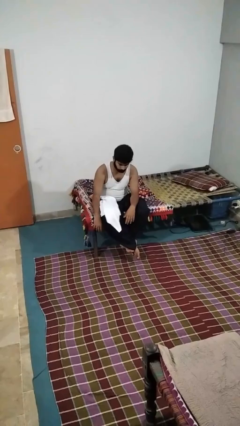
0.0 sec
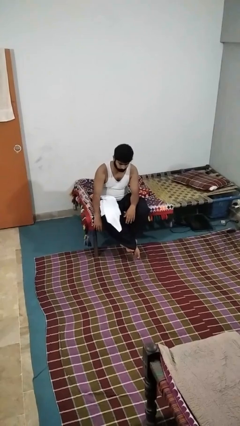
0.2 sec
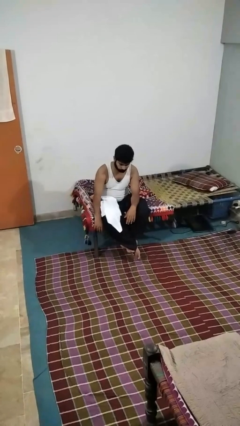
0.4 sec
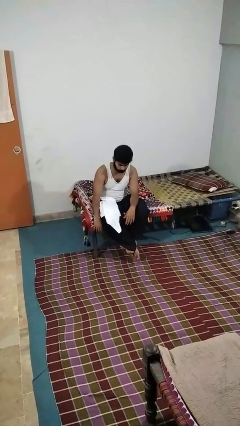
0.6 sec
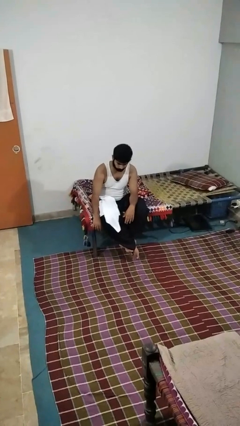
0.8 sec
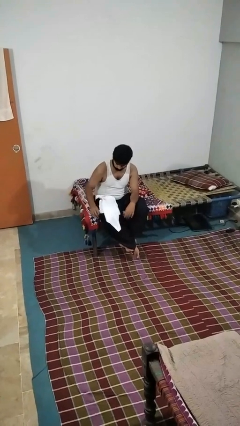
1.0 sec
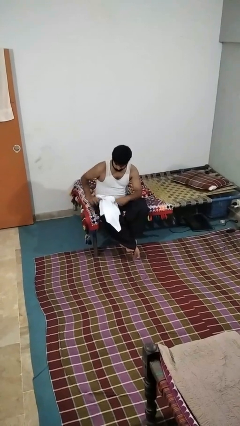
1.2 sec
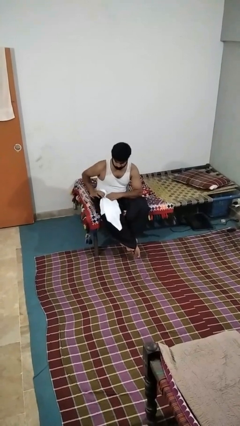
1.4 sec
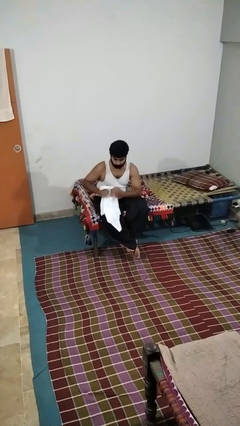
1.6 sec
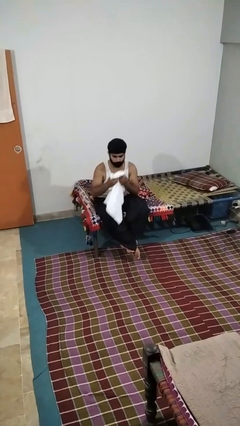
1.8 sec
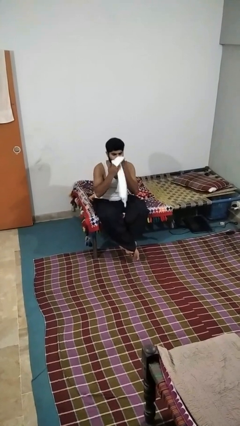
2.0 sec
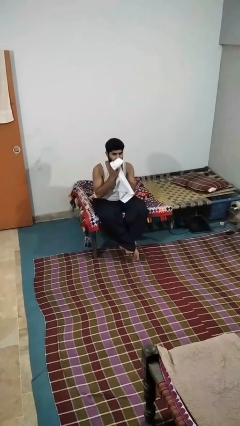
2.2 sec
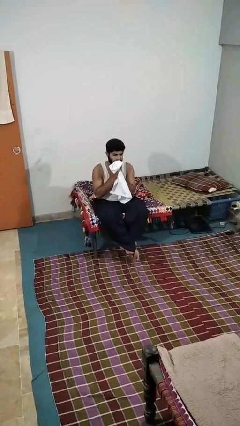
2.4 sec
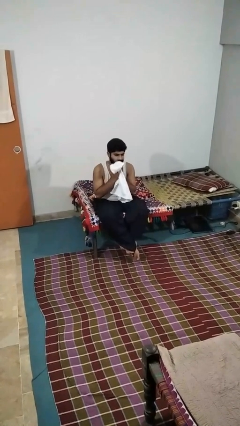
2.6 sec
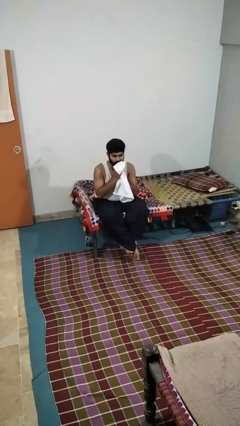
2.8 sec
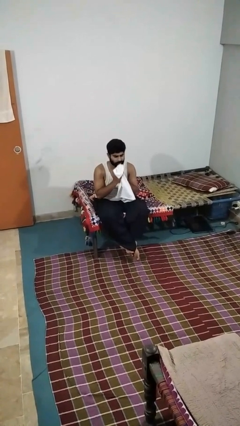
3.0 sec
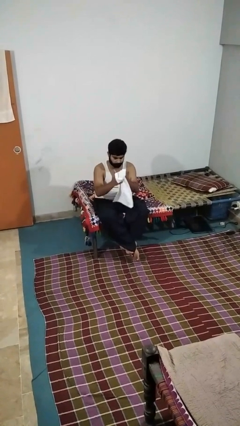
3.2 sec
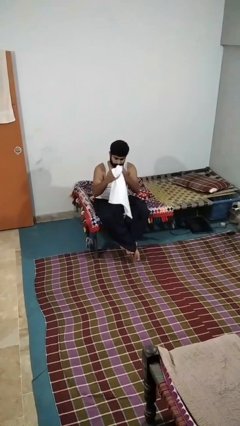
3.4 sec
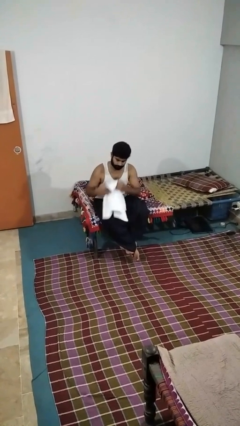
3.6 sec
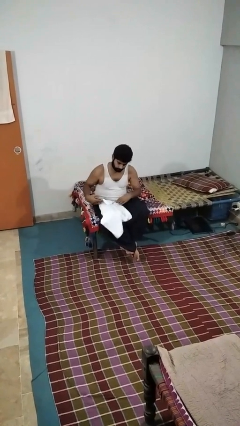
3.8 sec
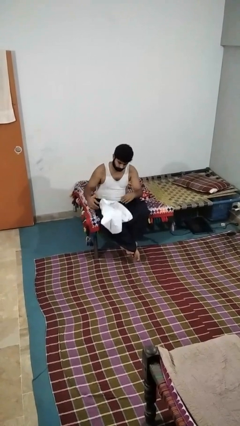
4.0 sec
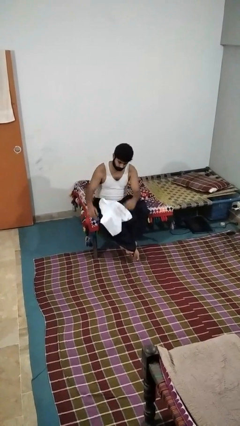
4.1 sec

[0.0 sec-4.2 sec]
person wipes mouth with napkin

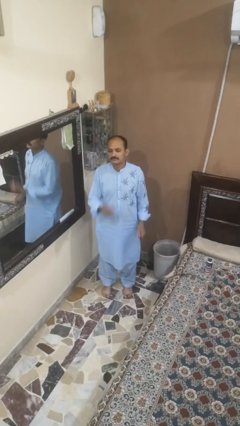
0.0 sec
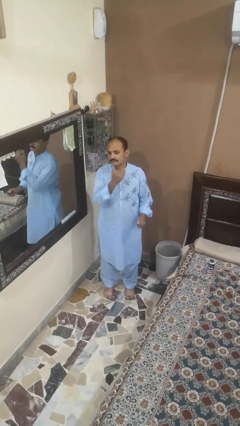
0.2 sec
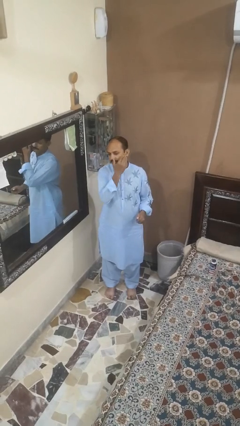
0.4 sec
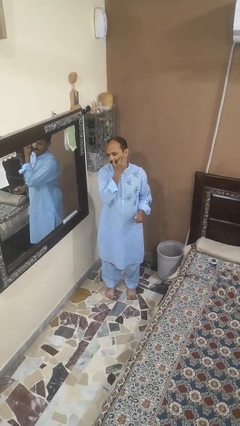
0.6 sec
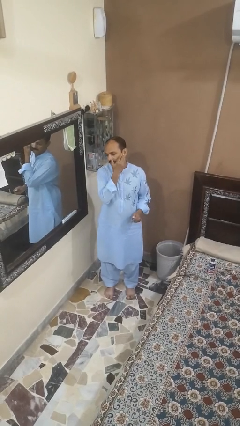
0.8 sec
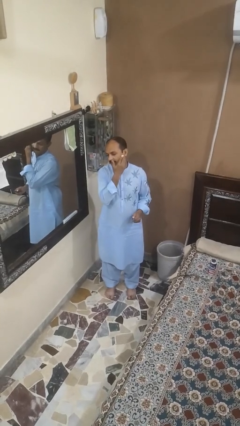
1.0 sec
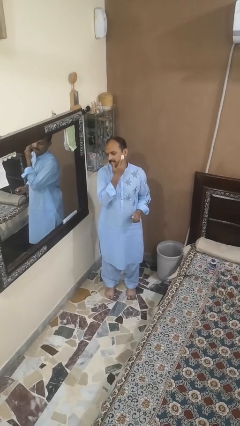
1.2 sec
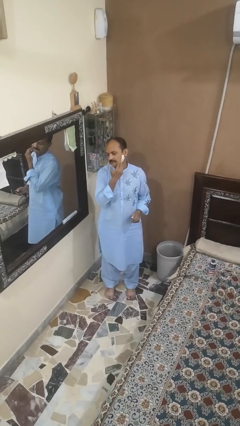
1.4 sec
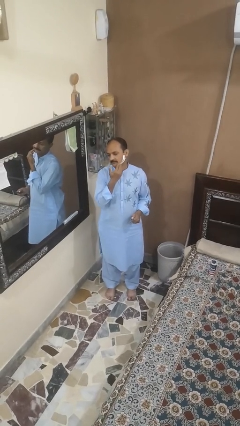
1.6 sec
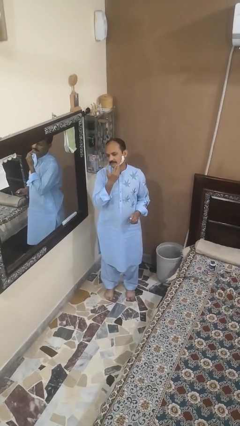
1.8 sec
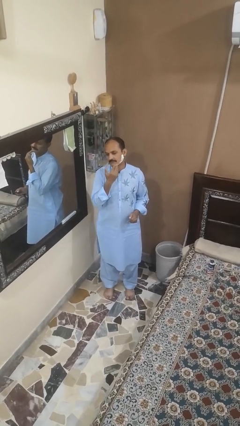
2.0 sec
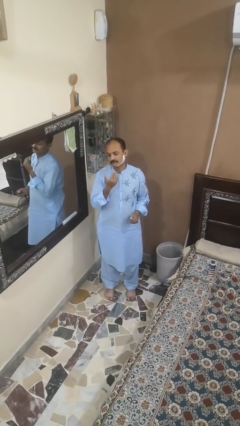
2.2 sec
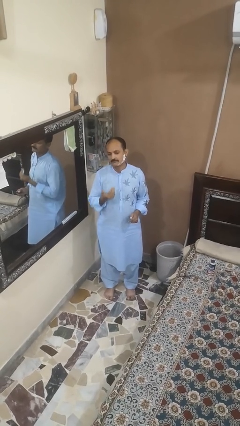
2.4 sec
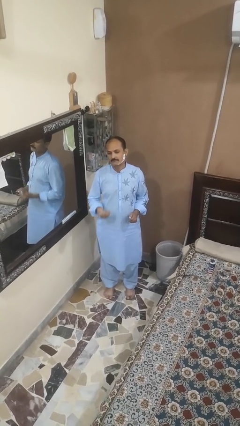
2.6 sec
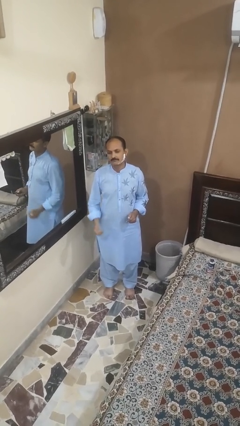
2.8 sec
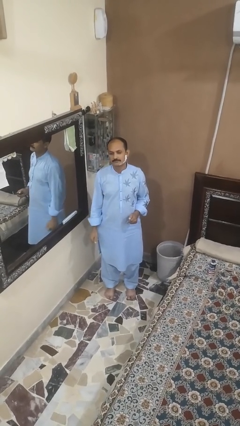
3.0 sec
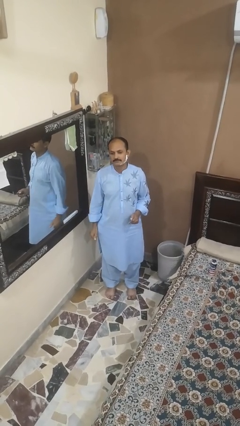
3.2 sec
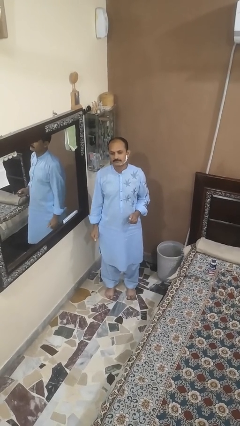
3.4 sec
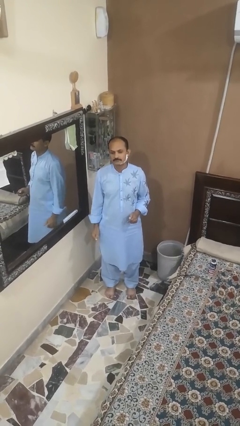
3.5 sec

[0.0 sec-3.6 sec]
person applies shaving cream

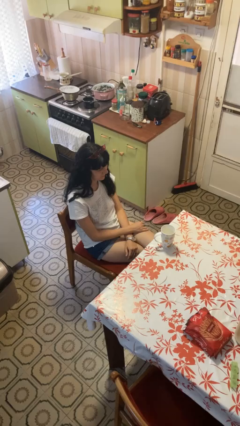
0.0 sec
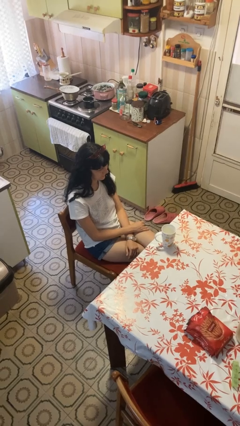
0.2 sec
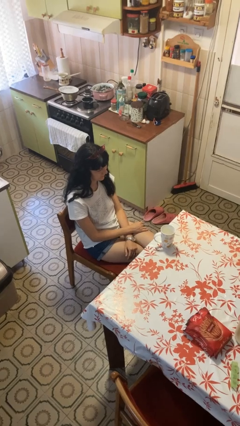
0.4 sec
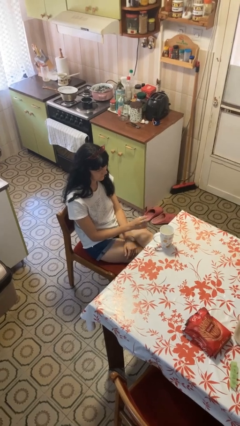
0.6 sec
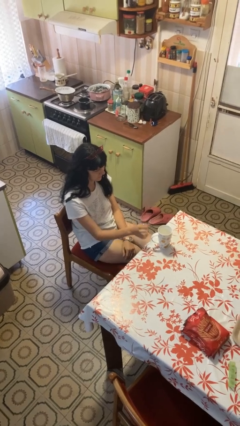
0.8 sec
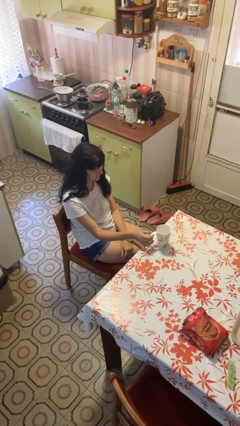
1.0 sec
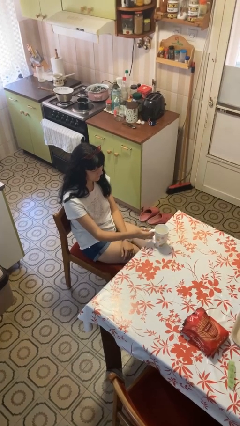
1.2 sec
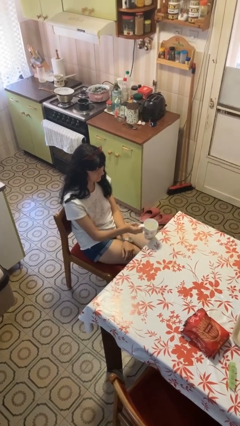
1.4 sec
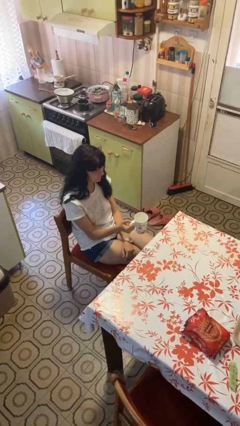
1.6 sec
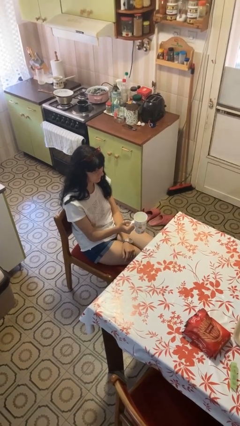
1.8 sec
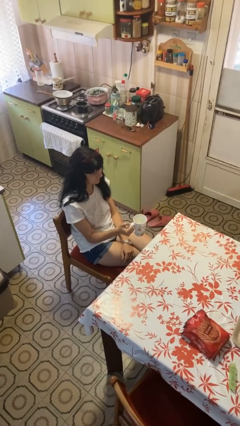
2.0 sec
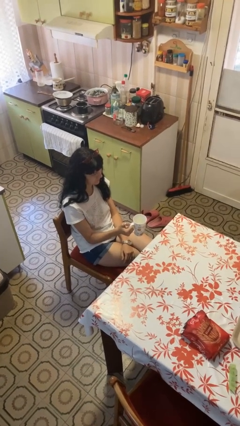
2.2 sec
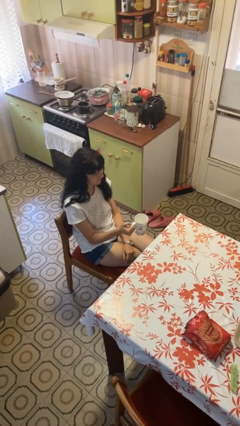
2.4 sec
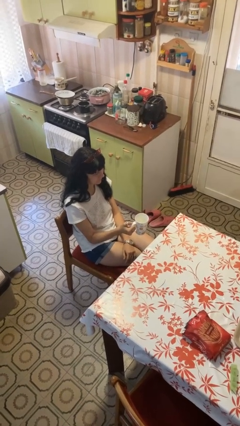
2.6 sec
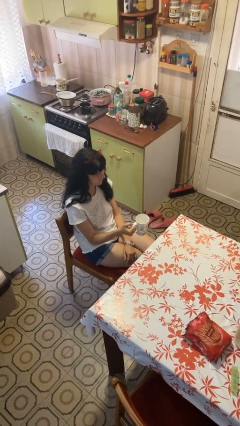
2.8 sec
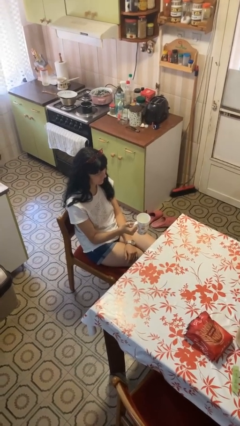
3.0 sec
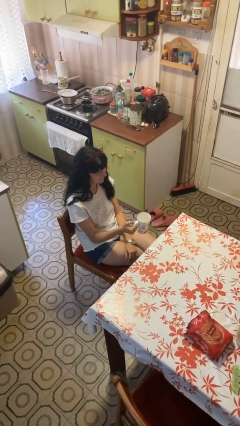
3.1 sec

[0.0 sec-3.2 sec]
person picks up object from table

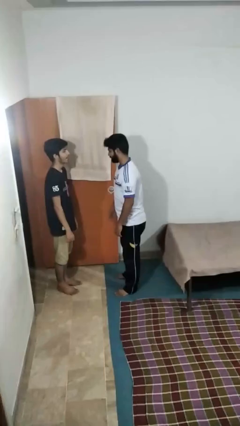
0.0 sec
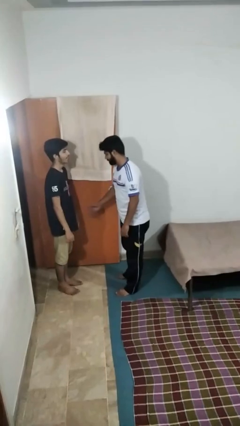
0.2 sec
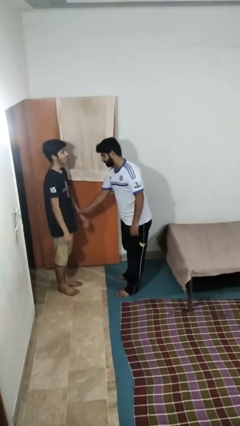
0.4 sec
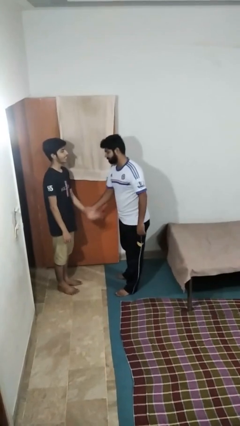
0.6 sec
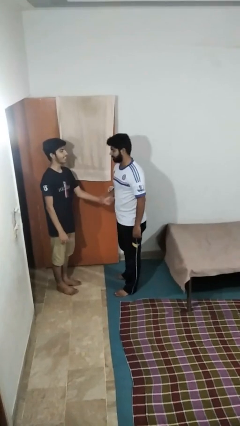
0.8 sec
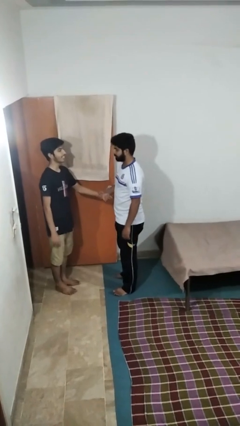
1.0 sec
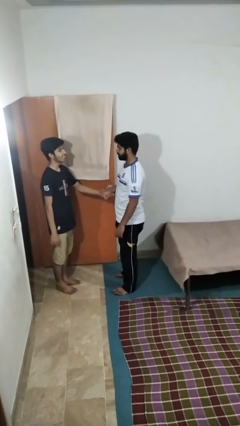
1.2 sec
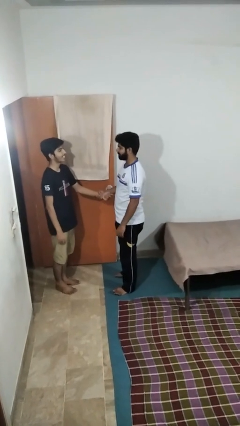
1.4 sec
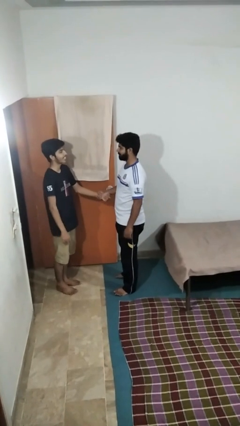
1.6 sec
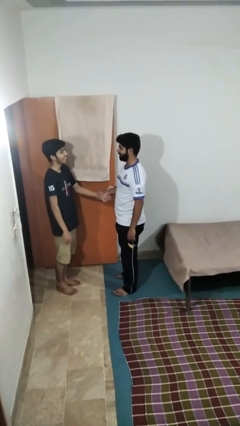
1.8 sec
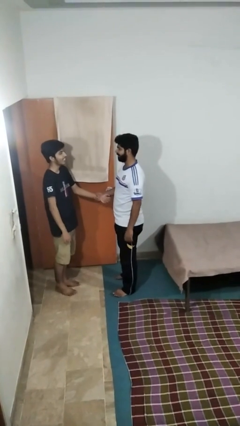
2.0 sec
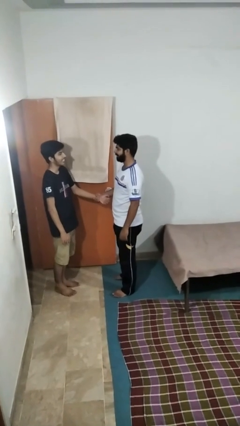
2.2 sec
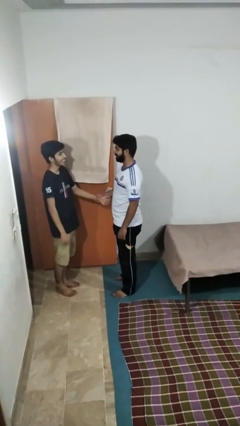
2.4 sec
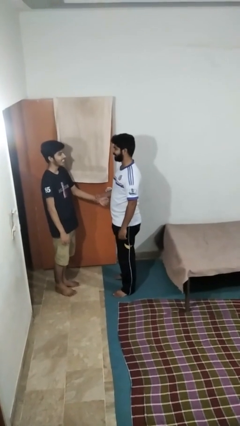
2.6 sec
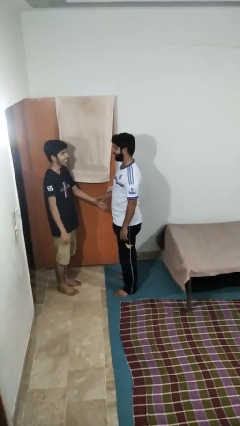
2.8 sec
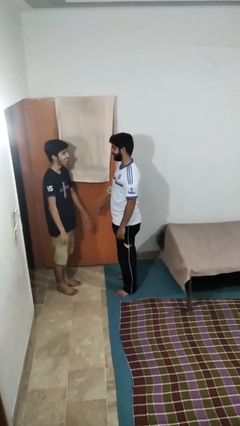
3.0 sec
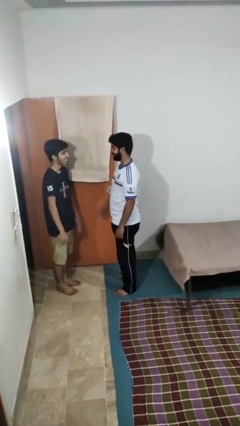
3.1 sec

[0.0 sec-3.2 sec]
person grabs person by forearm

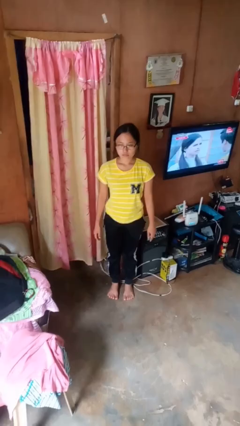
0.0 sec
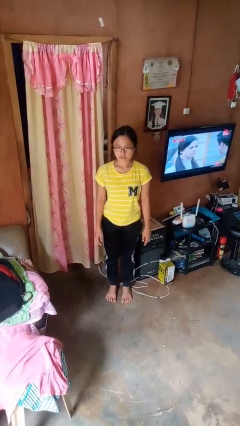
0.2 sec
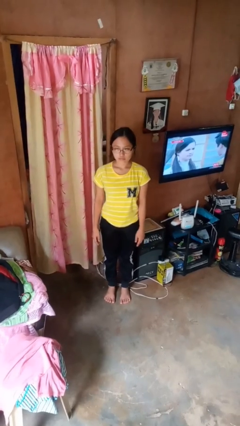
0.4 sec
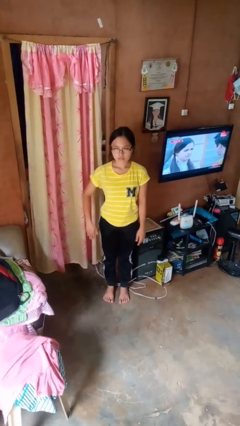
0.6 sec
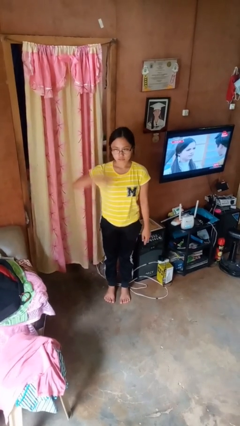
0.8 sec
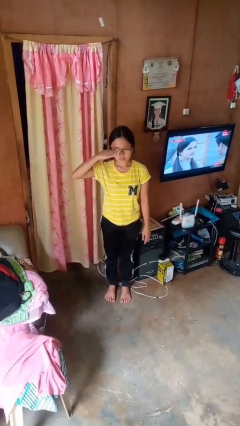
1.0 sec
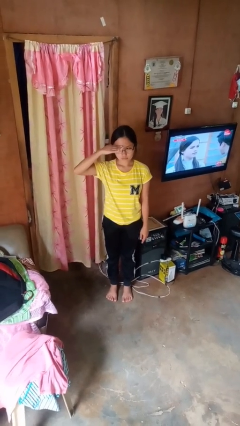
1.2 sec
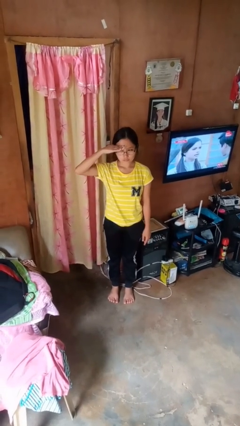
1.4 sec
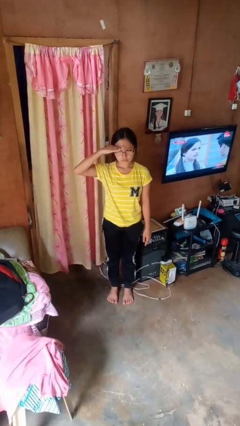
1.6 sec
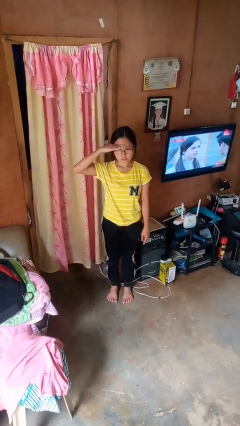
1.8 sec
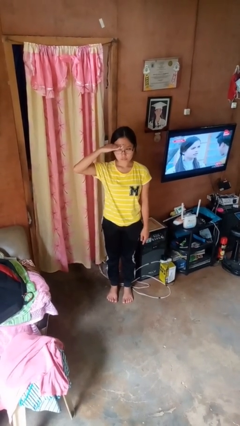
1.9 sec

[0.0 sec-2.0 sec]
person salutes

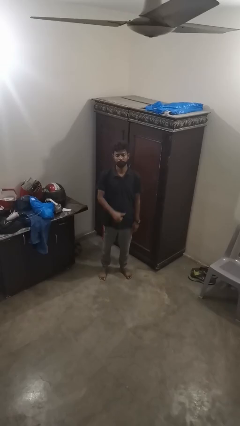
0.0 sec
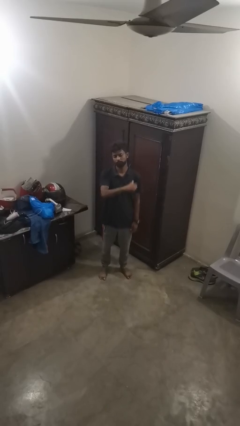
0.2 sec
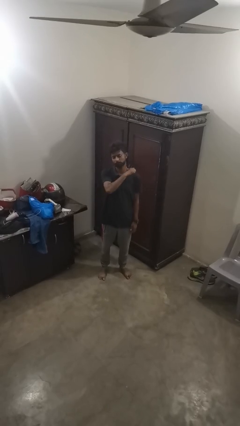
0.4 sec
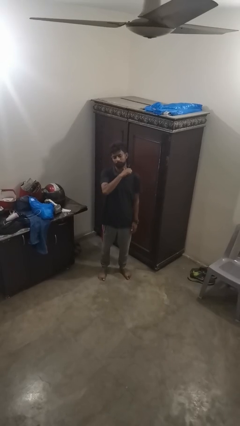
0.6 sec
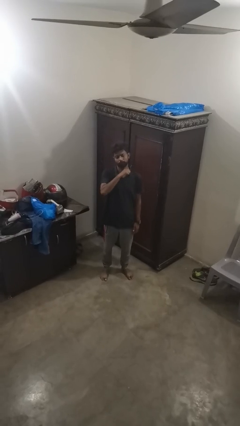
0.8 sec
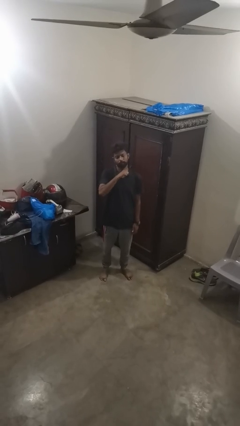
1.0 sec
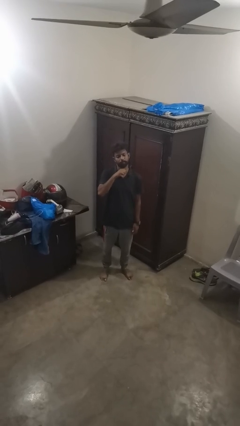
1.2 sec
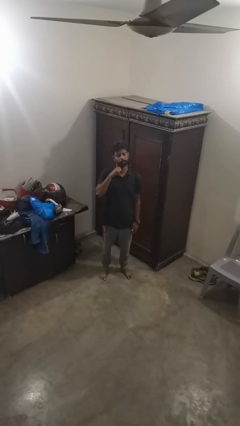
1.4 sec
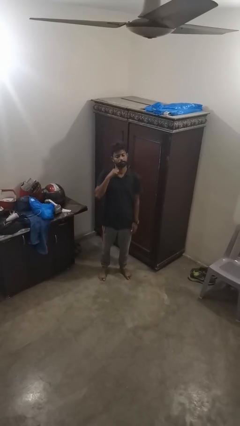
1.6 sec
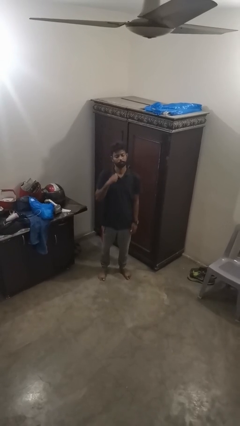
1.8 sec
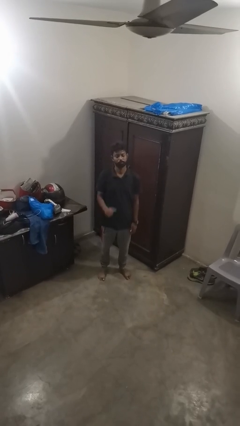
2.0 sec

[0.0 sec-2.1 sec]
person gestures cut
